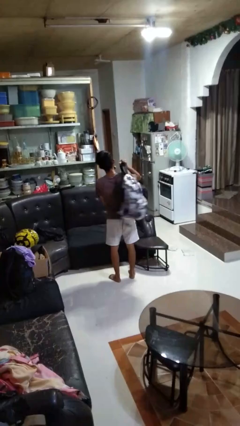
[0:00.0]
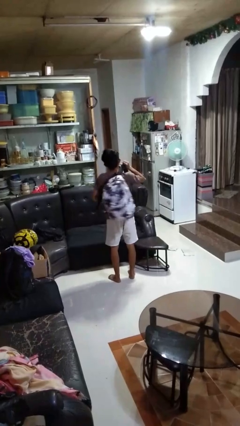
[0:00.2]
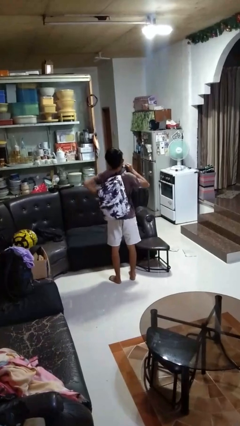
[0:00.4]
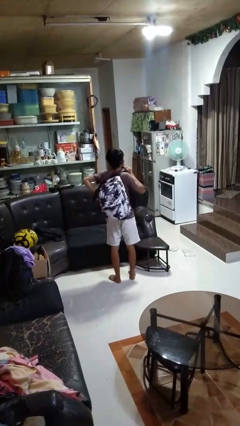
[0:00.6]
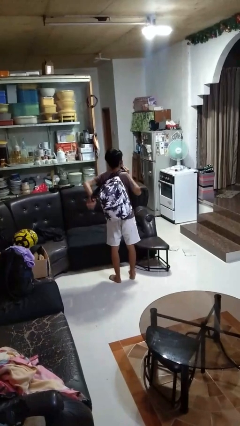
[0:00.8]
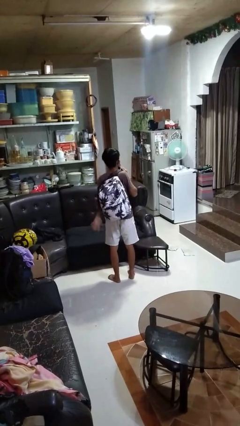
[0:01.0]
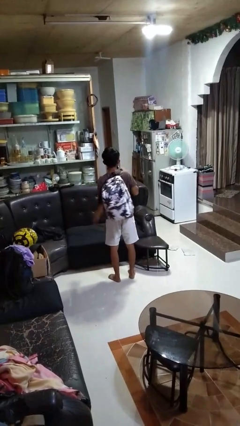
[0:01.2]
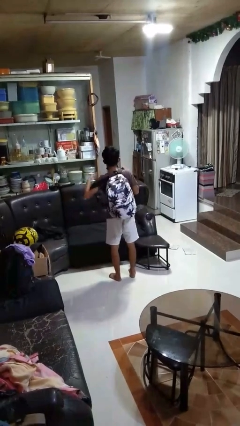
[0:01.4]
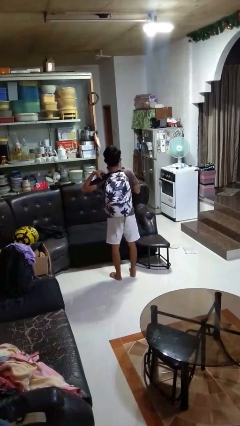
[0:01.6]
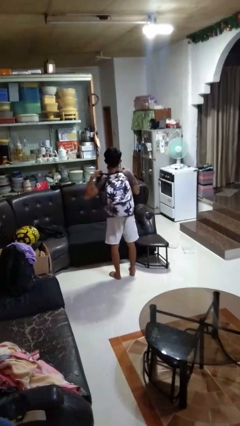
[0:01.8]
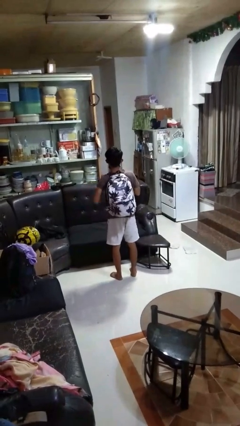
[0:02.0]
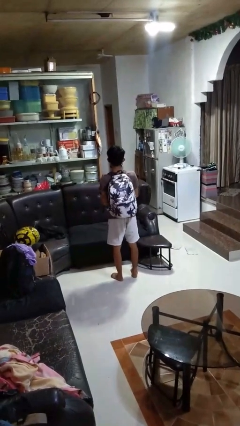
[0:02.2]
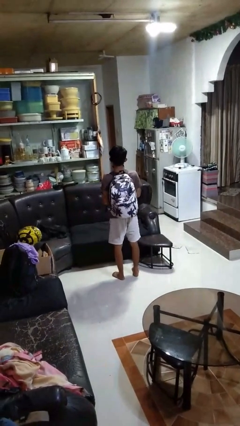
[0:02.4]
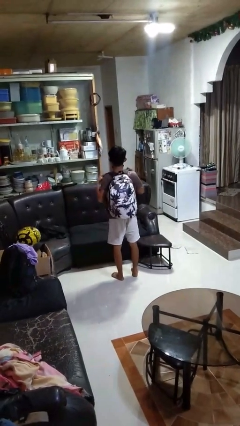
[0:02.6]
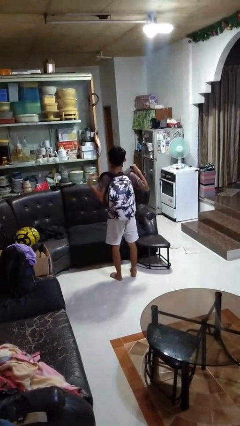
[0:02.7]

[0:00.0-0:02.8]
person puts on backpack

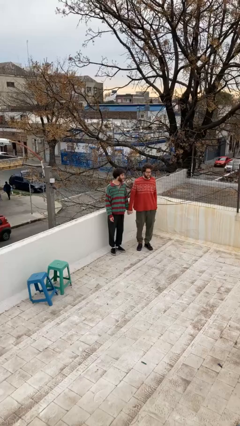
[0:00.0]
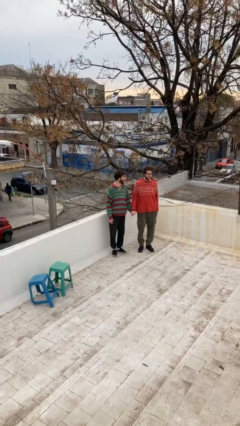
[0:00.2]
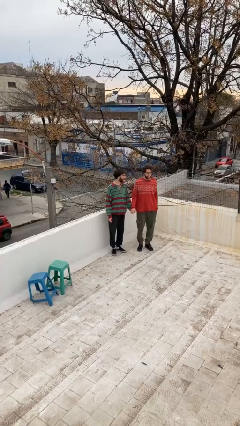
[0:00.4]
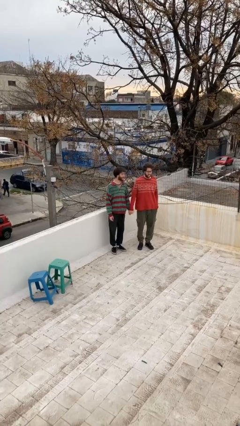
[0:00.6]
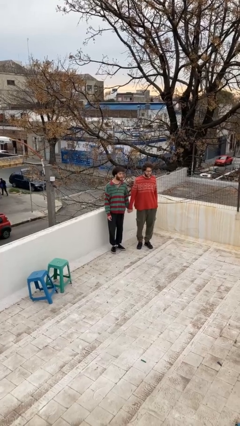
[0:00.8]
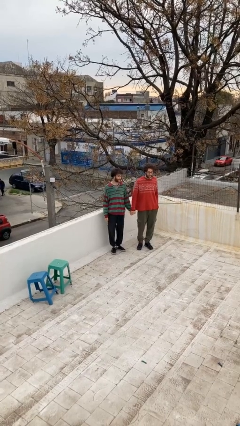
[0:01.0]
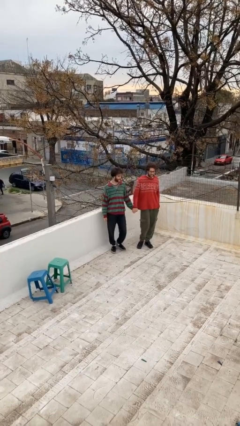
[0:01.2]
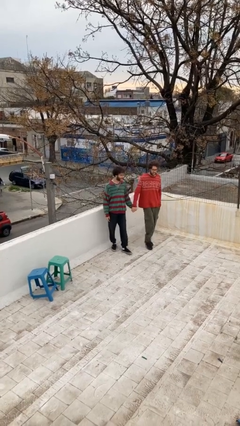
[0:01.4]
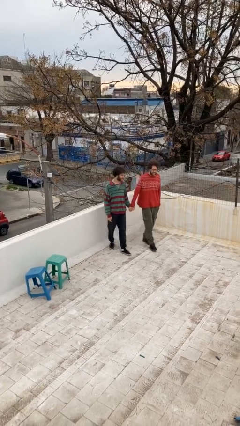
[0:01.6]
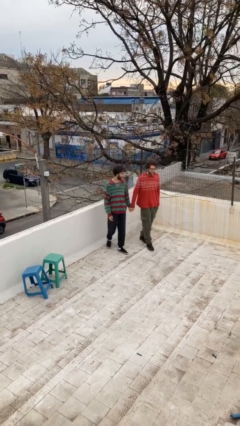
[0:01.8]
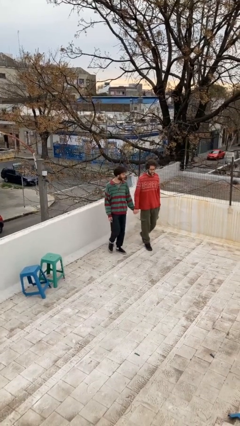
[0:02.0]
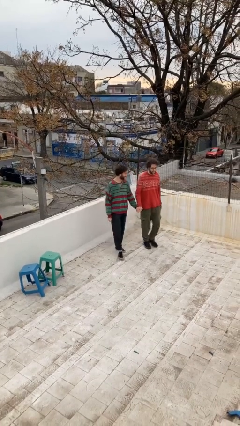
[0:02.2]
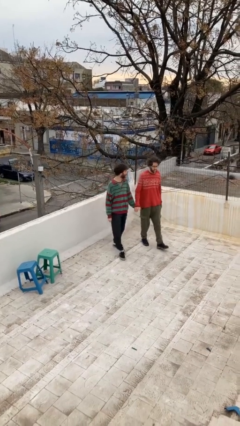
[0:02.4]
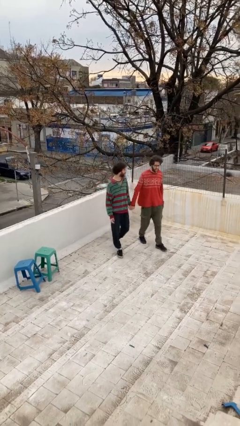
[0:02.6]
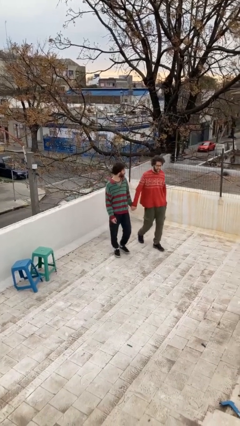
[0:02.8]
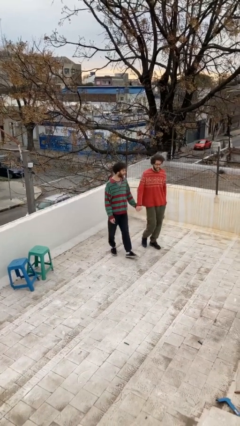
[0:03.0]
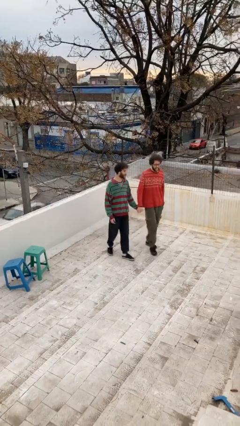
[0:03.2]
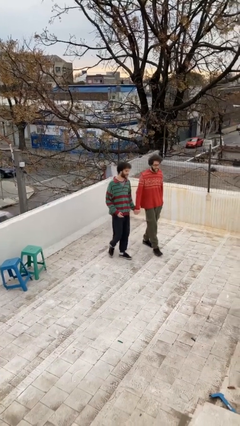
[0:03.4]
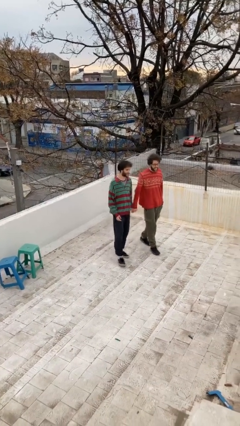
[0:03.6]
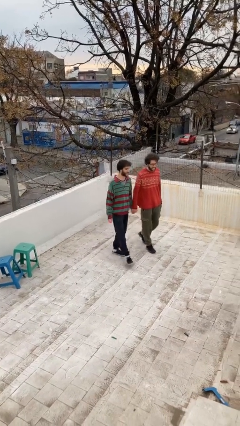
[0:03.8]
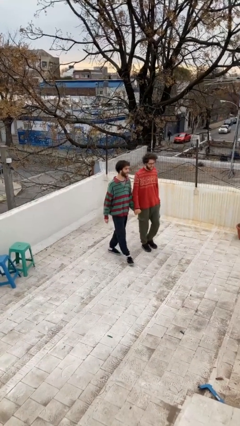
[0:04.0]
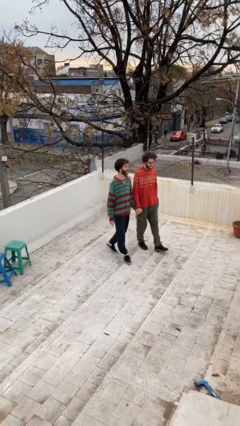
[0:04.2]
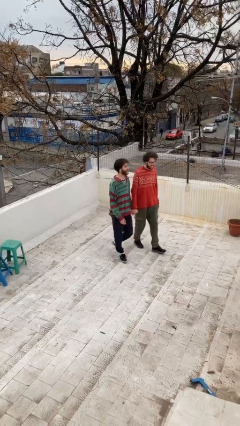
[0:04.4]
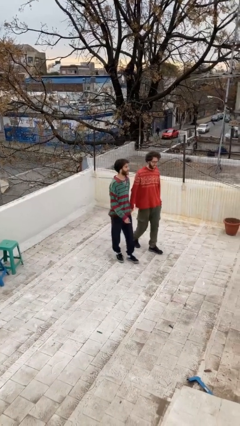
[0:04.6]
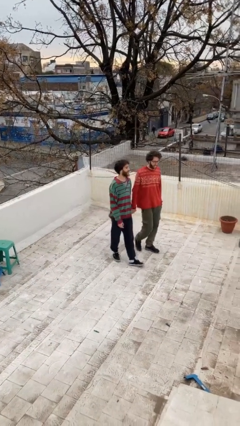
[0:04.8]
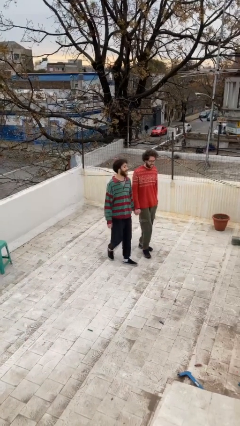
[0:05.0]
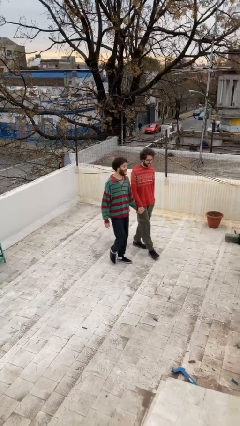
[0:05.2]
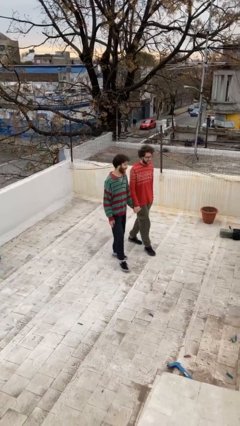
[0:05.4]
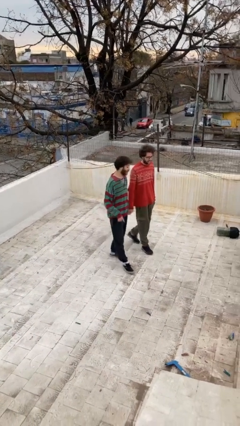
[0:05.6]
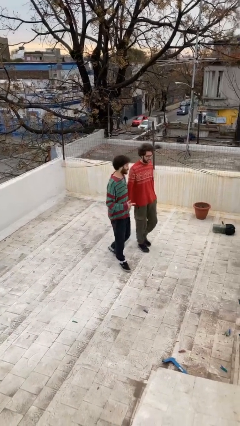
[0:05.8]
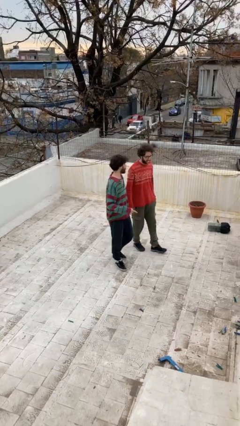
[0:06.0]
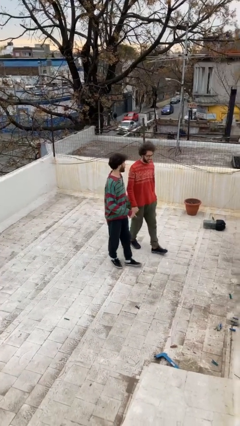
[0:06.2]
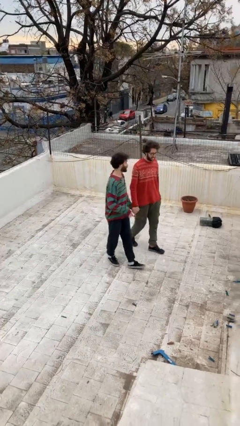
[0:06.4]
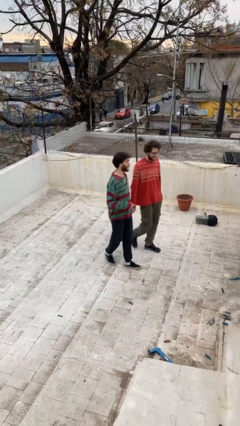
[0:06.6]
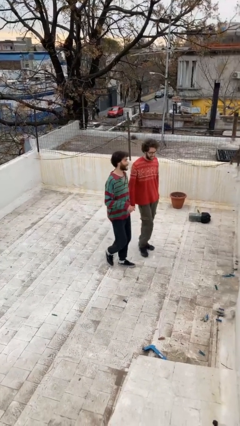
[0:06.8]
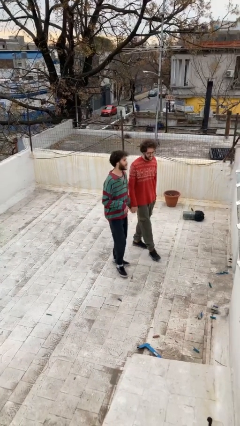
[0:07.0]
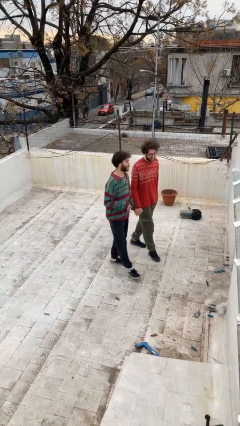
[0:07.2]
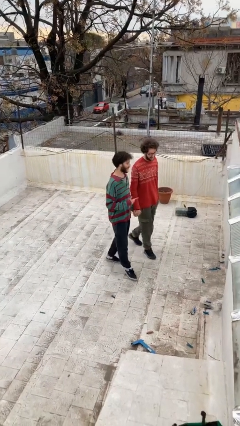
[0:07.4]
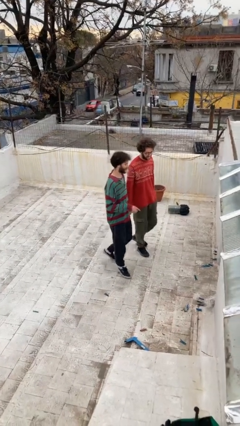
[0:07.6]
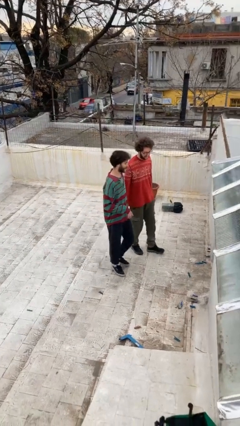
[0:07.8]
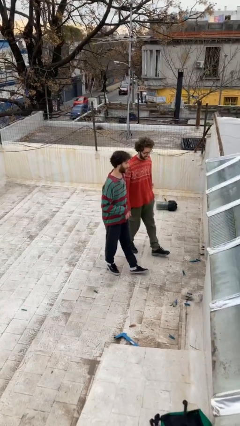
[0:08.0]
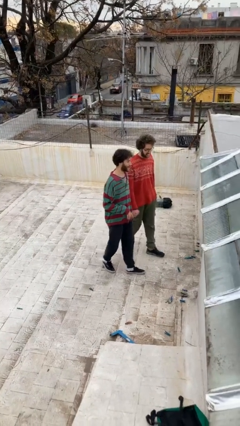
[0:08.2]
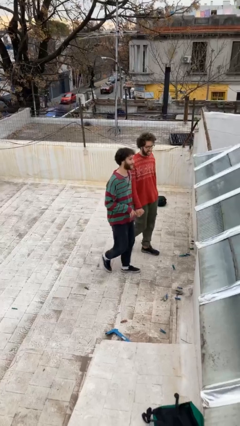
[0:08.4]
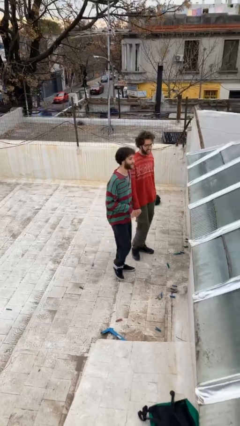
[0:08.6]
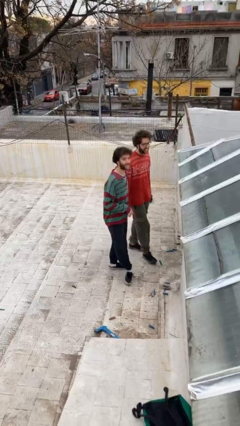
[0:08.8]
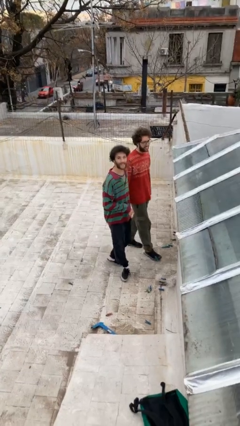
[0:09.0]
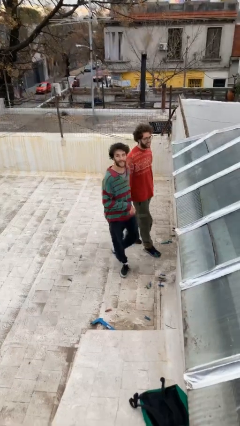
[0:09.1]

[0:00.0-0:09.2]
person holds hand

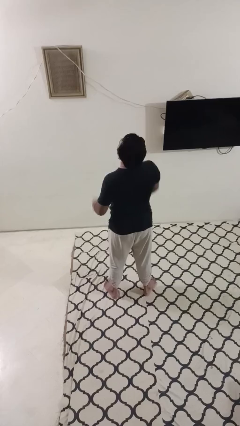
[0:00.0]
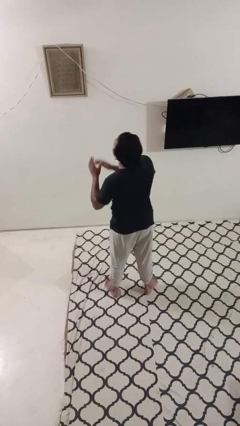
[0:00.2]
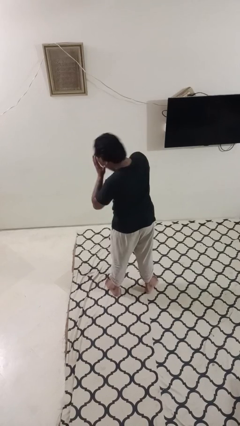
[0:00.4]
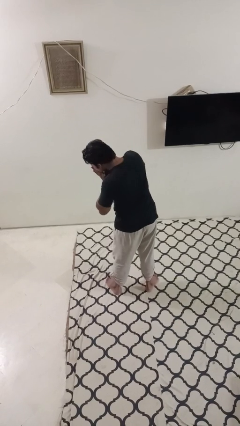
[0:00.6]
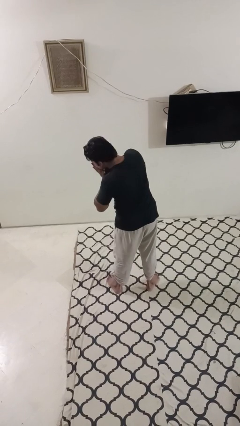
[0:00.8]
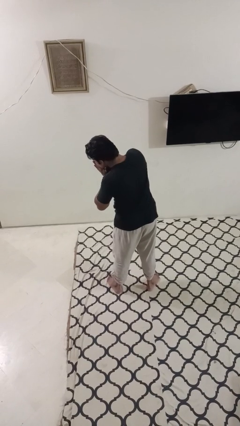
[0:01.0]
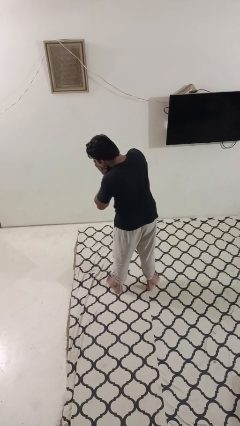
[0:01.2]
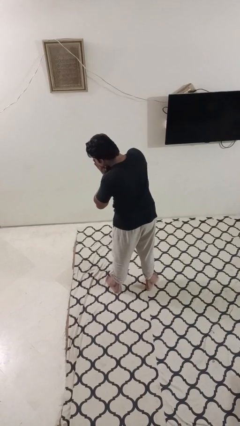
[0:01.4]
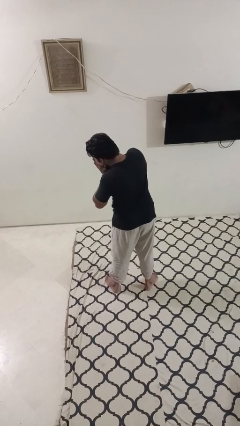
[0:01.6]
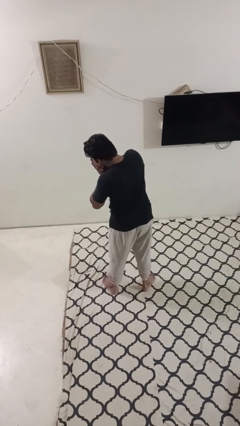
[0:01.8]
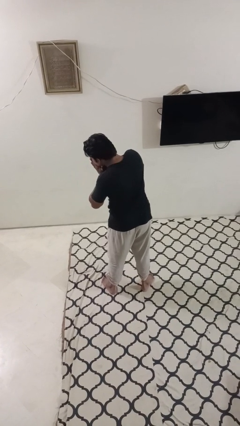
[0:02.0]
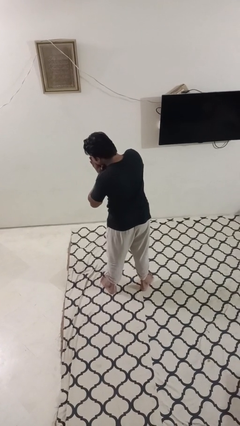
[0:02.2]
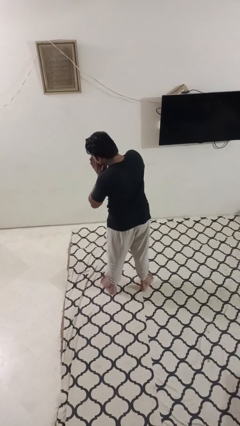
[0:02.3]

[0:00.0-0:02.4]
person sneezes into hand

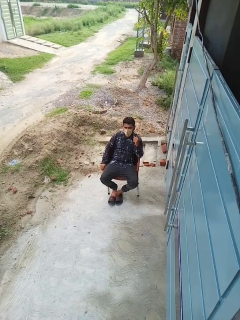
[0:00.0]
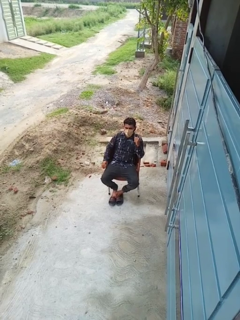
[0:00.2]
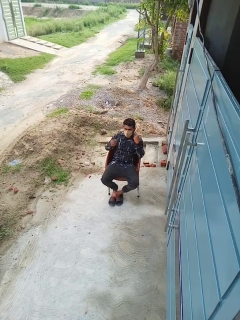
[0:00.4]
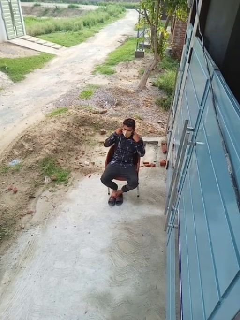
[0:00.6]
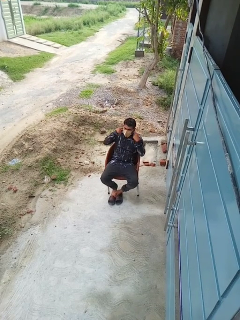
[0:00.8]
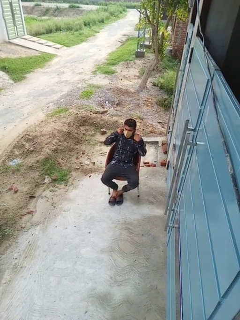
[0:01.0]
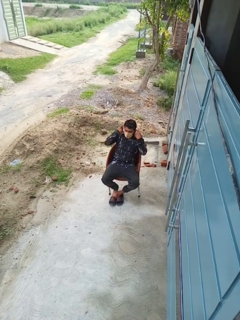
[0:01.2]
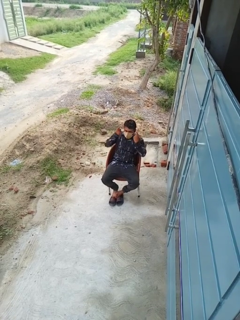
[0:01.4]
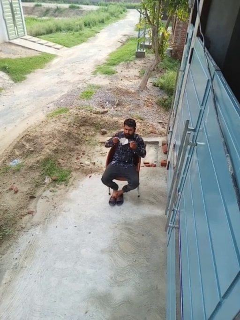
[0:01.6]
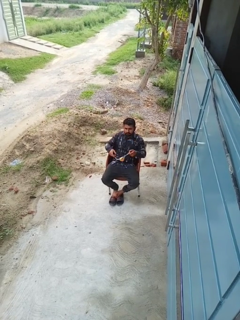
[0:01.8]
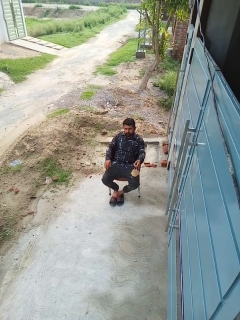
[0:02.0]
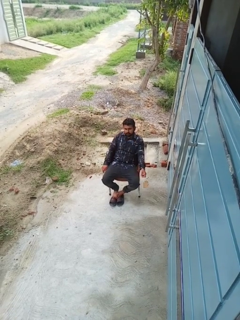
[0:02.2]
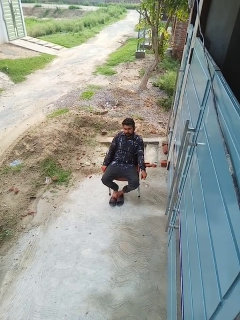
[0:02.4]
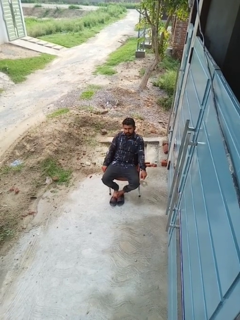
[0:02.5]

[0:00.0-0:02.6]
person takes off facemask

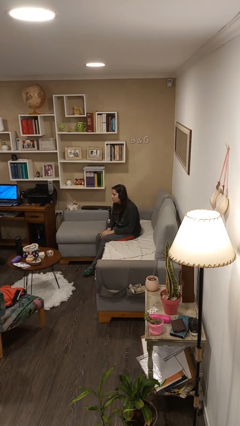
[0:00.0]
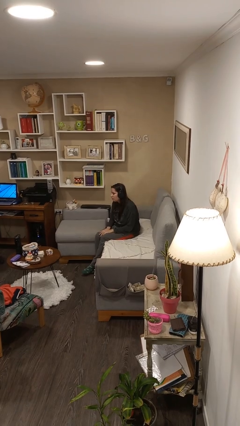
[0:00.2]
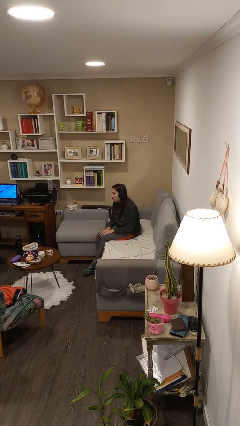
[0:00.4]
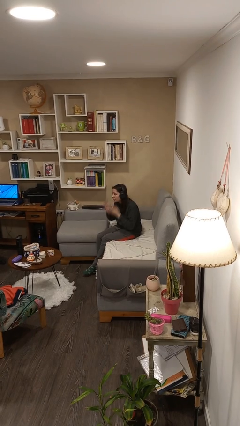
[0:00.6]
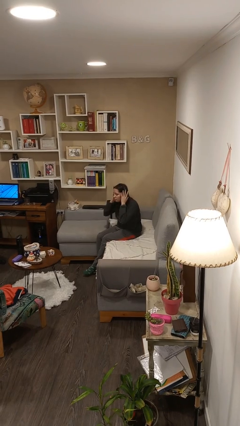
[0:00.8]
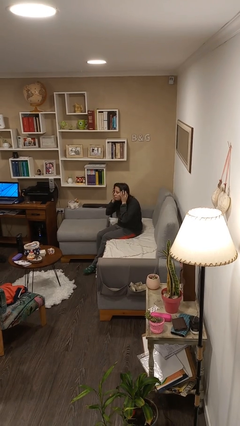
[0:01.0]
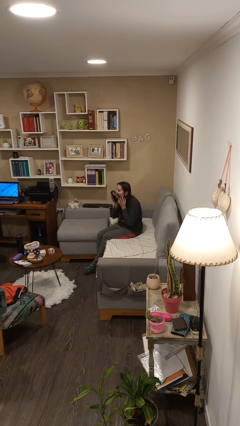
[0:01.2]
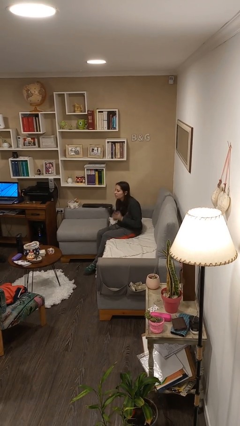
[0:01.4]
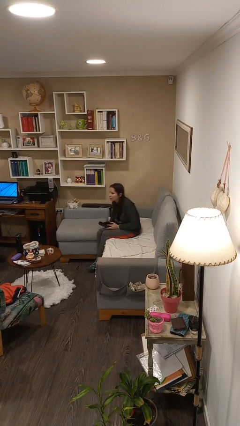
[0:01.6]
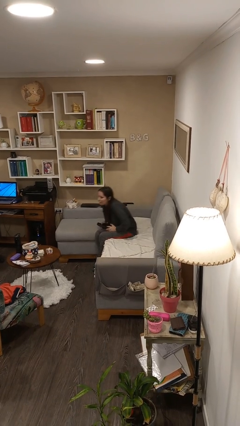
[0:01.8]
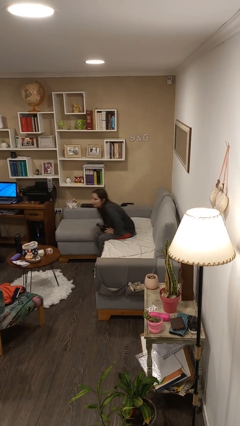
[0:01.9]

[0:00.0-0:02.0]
person takes off headphones
